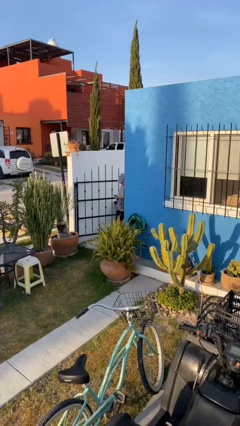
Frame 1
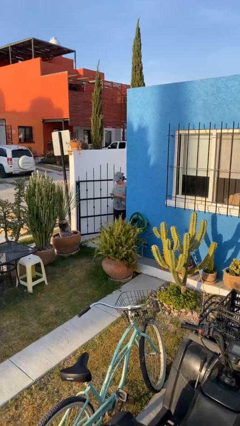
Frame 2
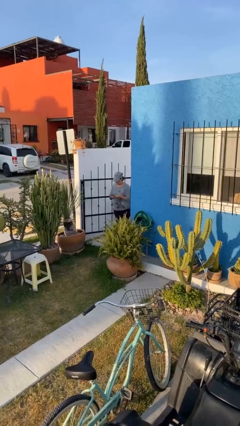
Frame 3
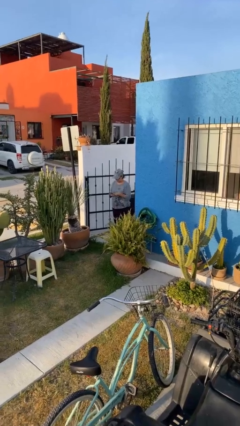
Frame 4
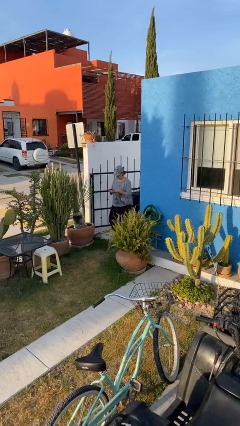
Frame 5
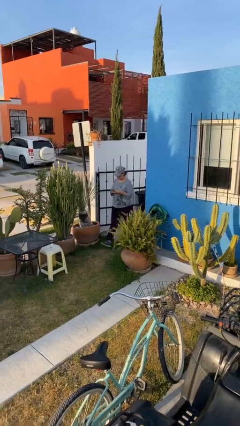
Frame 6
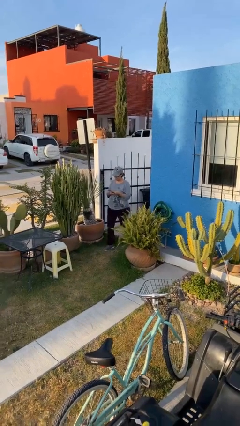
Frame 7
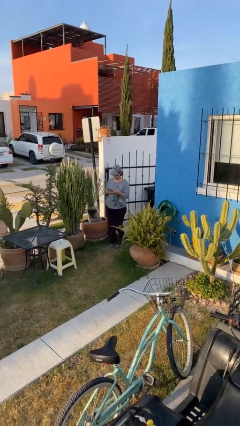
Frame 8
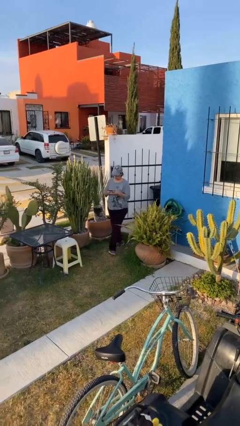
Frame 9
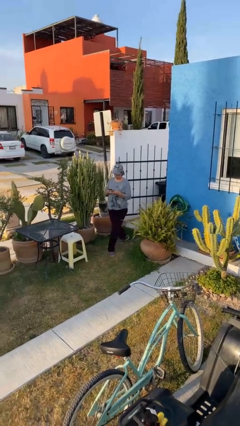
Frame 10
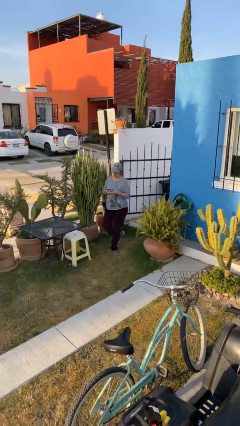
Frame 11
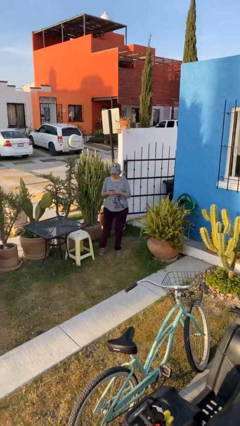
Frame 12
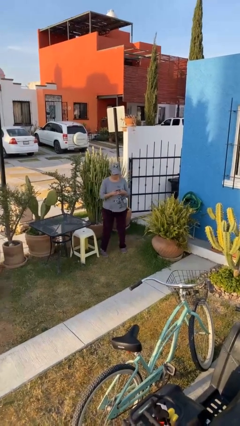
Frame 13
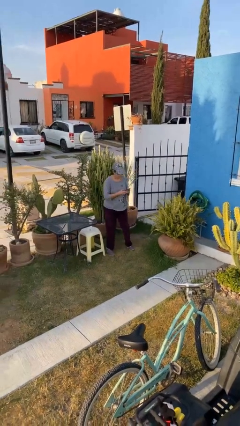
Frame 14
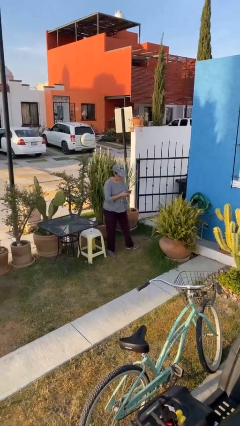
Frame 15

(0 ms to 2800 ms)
person enters scene through structure

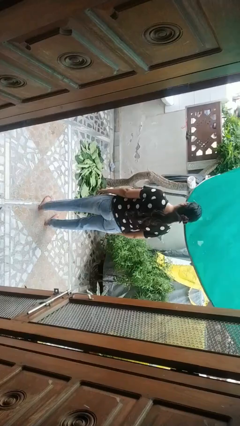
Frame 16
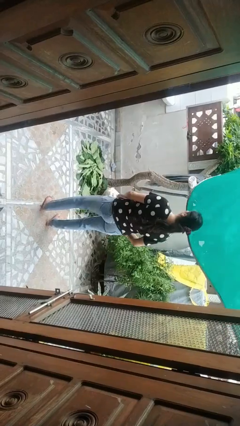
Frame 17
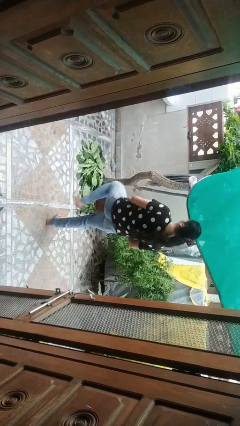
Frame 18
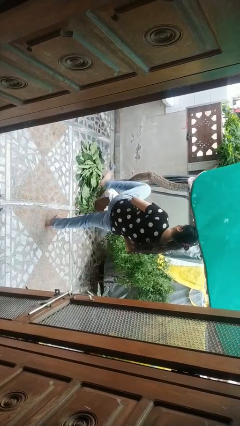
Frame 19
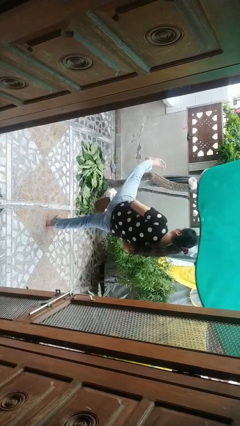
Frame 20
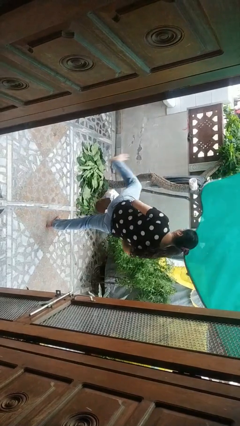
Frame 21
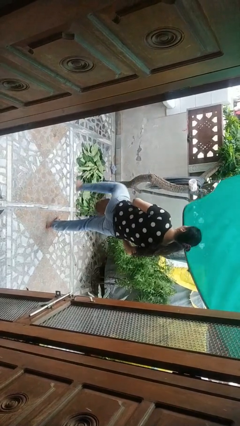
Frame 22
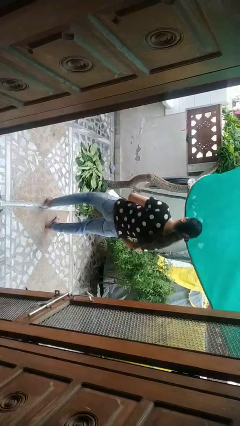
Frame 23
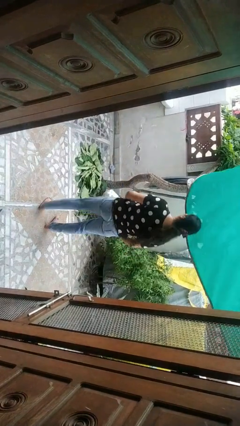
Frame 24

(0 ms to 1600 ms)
person karate kicks

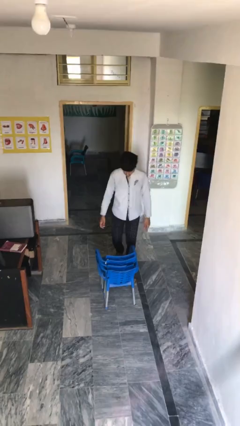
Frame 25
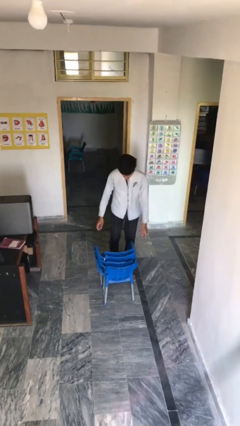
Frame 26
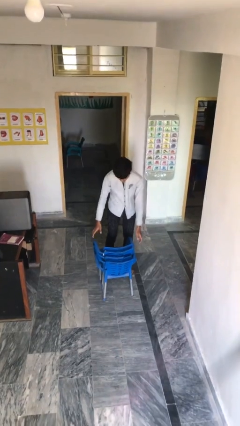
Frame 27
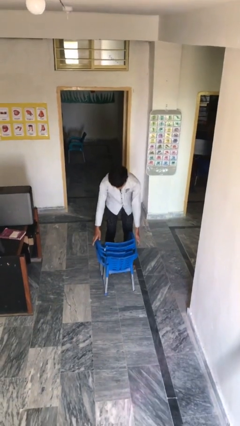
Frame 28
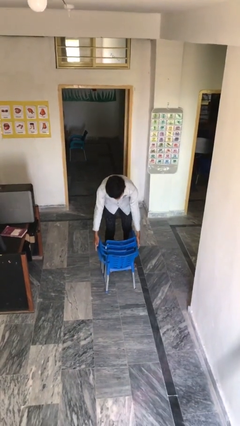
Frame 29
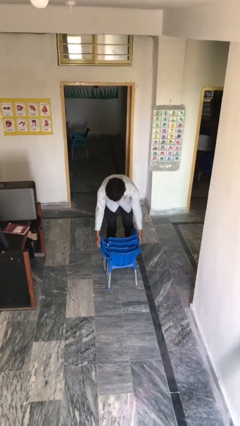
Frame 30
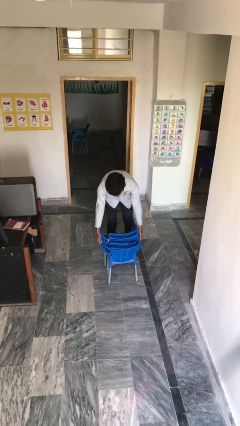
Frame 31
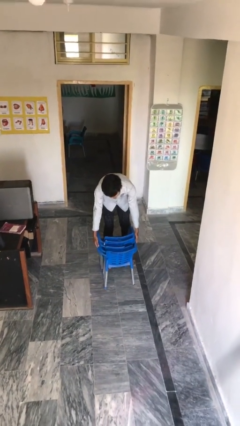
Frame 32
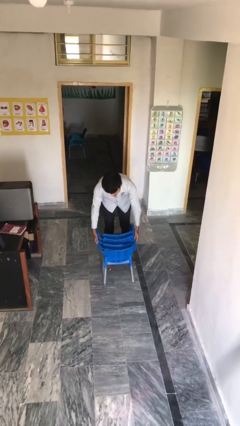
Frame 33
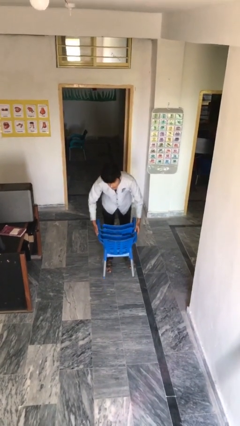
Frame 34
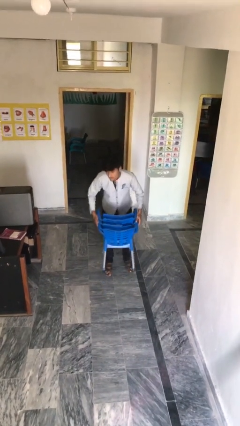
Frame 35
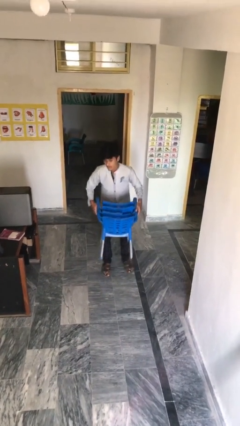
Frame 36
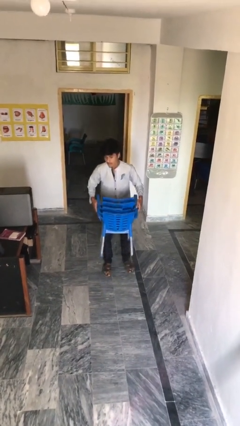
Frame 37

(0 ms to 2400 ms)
person picks up object from floor

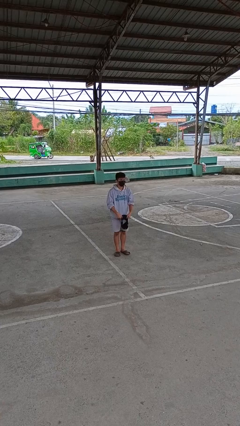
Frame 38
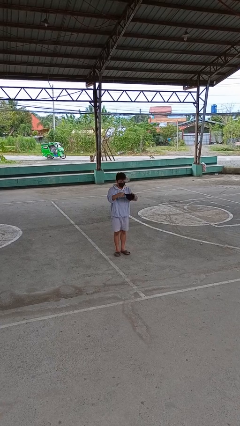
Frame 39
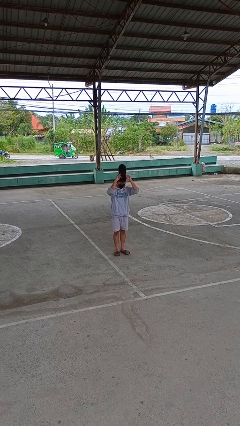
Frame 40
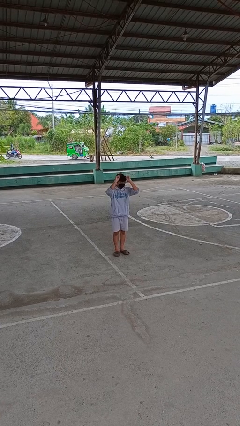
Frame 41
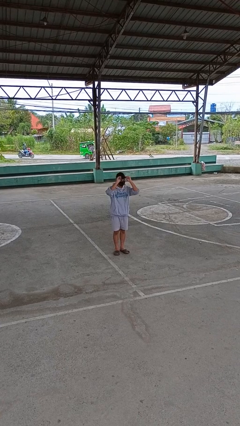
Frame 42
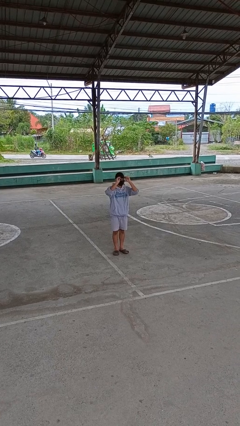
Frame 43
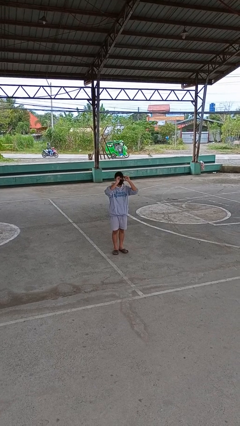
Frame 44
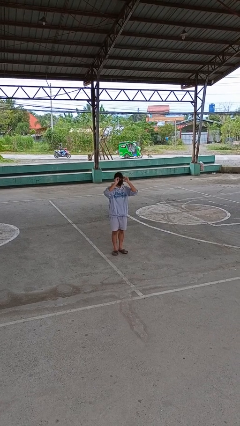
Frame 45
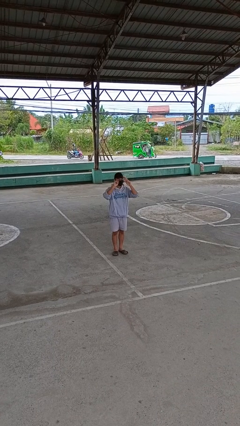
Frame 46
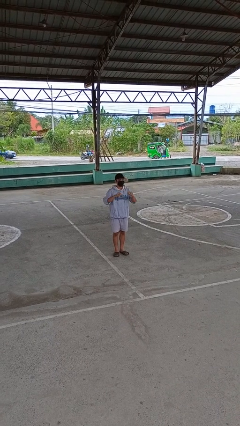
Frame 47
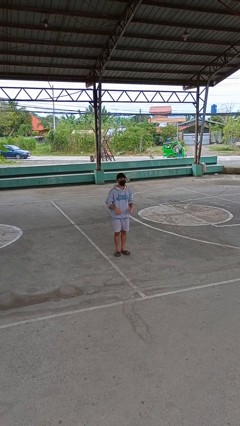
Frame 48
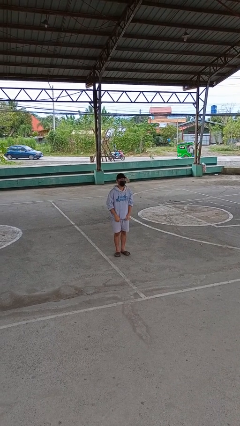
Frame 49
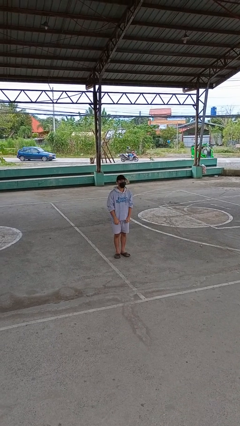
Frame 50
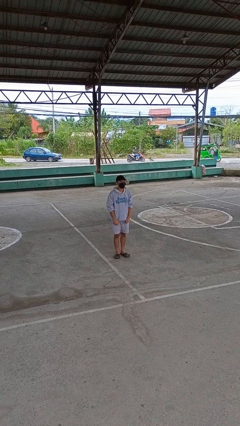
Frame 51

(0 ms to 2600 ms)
person puts on hat

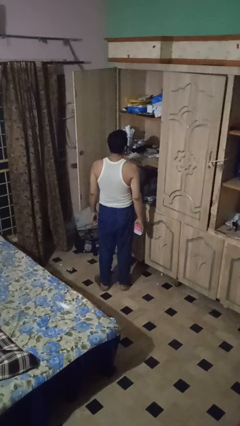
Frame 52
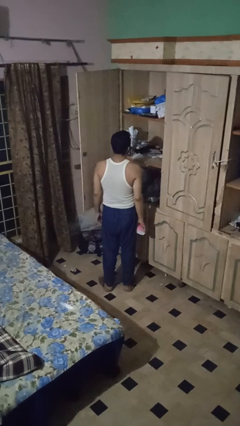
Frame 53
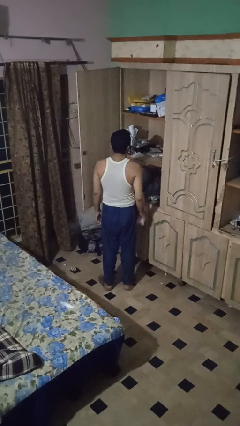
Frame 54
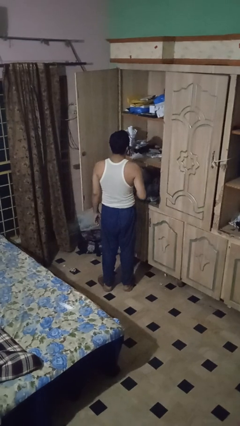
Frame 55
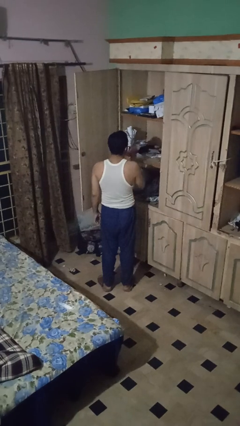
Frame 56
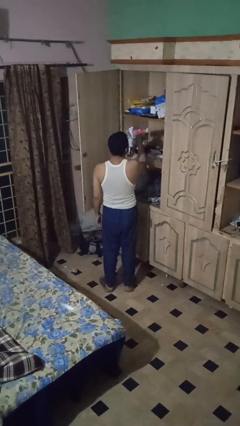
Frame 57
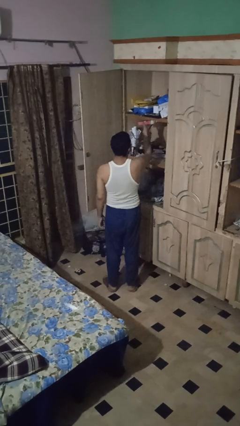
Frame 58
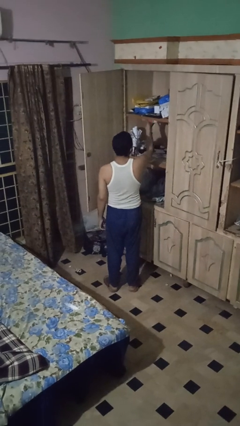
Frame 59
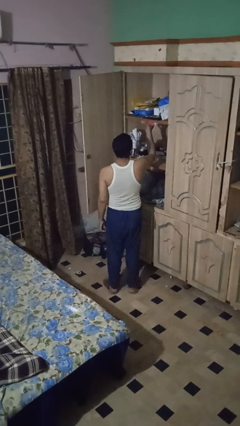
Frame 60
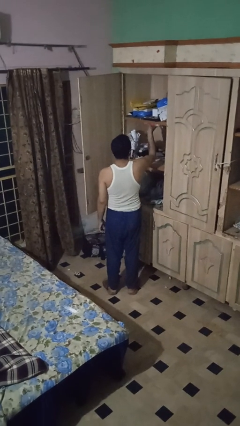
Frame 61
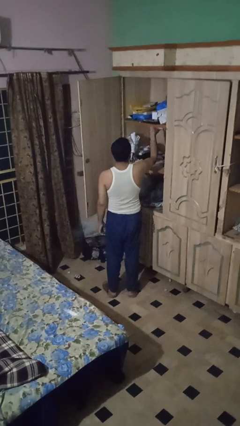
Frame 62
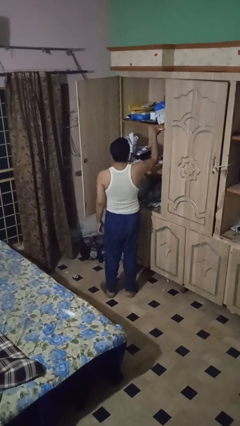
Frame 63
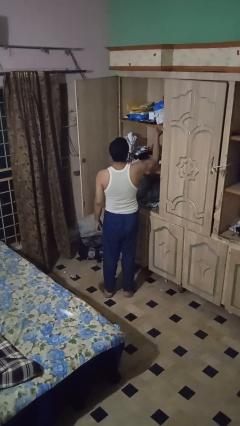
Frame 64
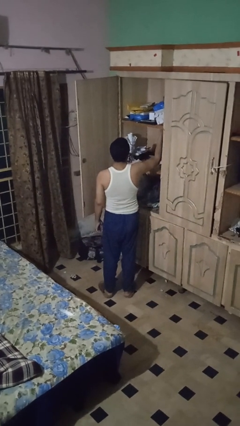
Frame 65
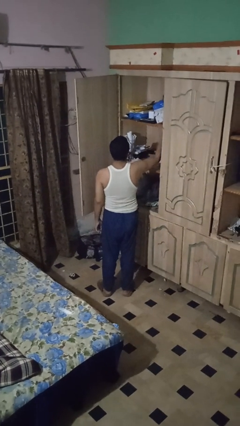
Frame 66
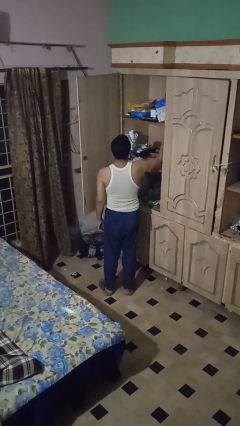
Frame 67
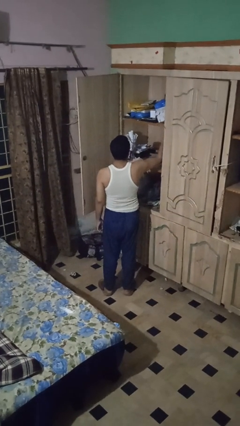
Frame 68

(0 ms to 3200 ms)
person dusts furniture

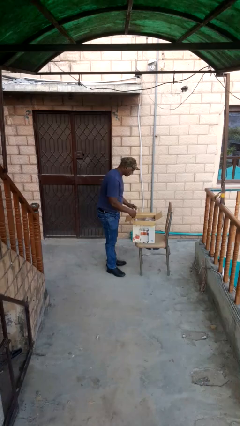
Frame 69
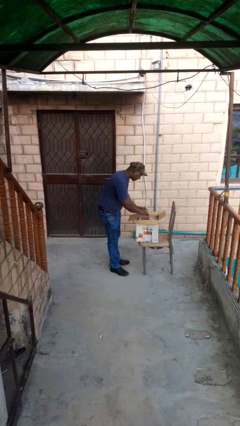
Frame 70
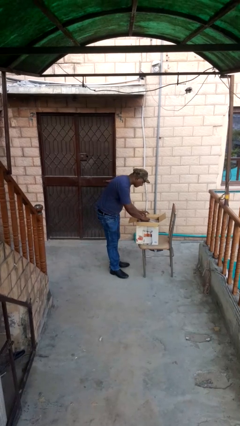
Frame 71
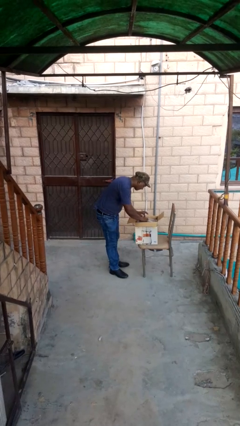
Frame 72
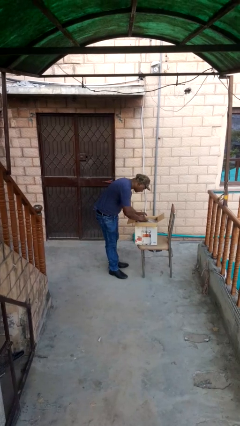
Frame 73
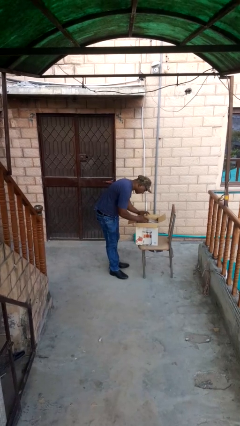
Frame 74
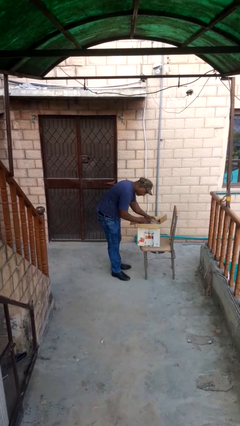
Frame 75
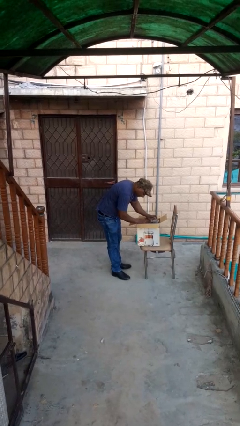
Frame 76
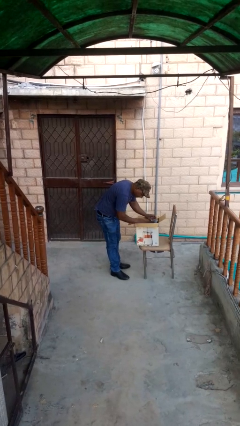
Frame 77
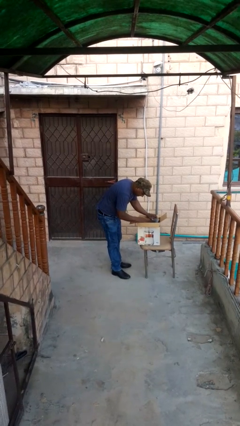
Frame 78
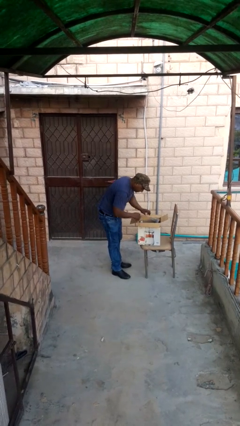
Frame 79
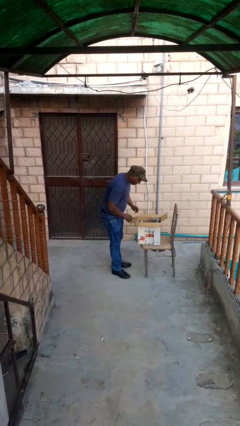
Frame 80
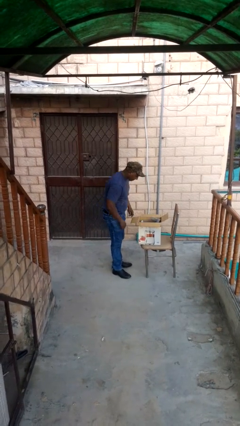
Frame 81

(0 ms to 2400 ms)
person searches in box

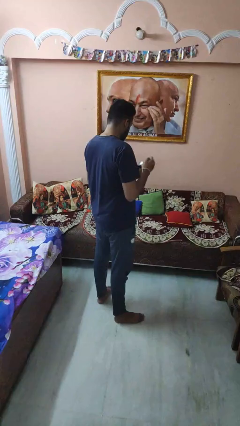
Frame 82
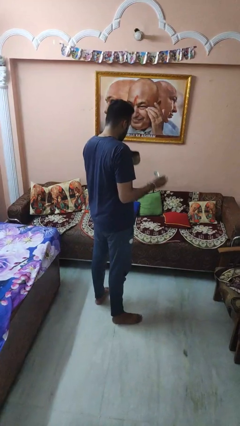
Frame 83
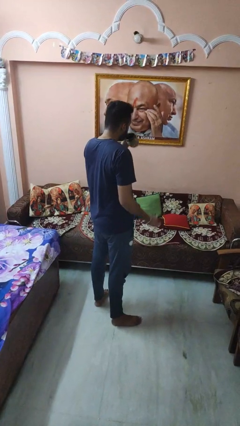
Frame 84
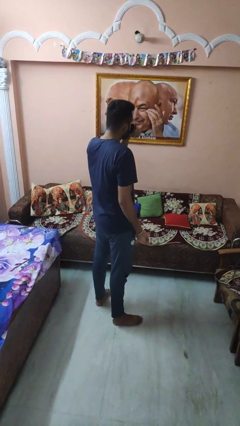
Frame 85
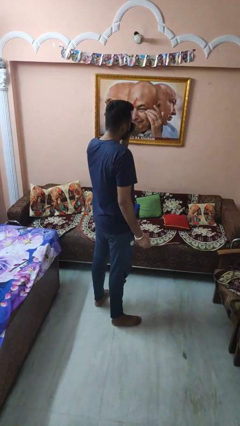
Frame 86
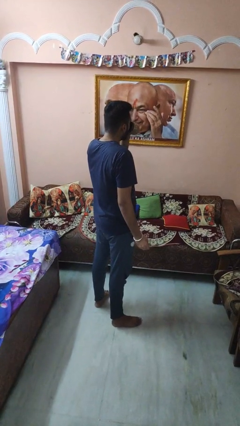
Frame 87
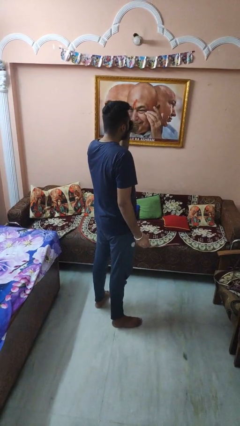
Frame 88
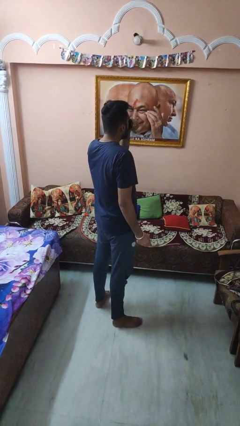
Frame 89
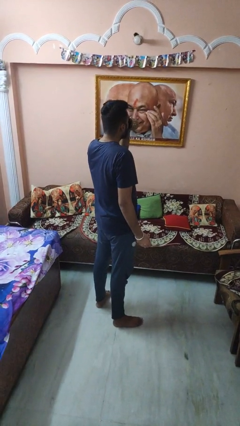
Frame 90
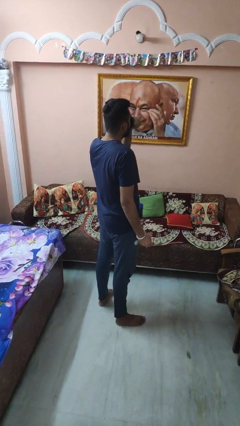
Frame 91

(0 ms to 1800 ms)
person drinks from mug
